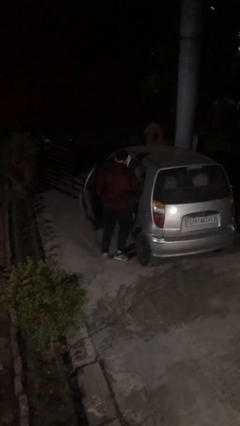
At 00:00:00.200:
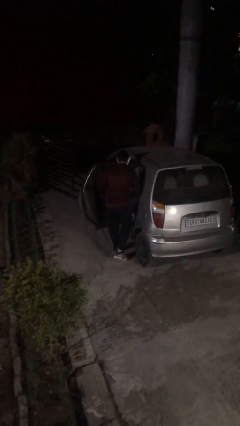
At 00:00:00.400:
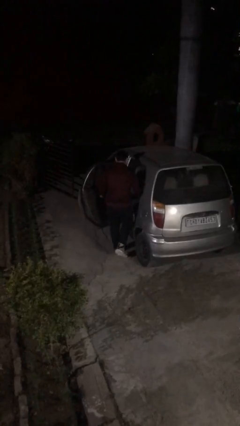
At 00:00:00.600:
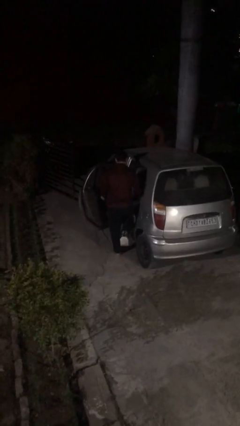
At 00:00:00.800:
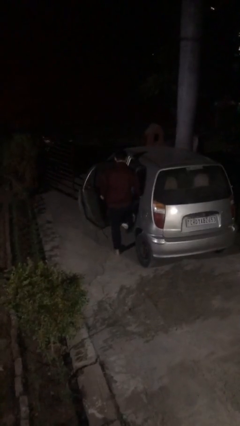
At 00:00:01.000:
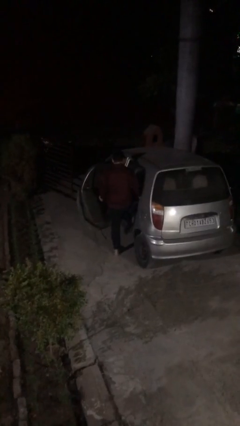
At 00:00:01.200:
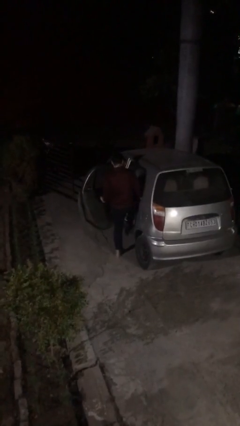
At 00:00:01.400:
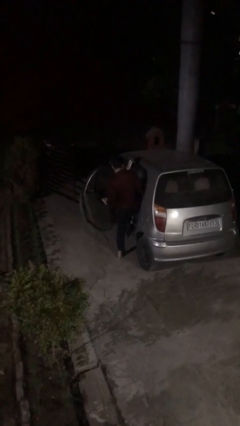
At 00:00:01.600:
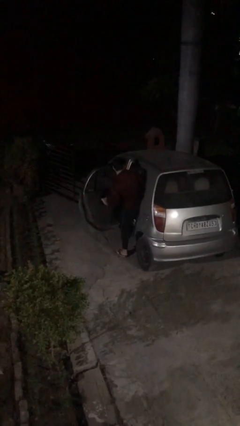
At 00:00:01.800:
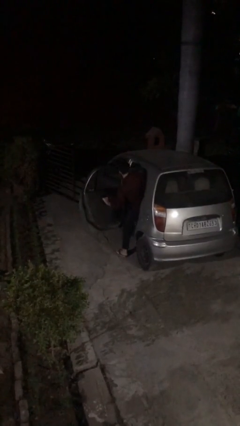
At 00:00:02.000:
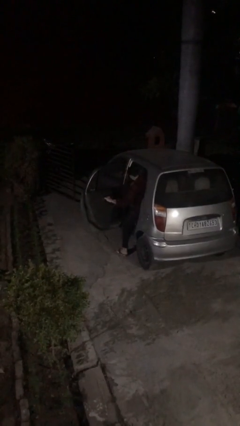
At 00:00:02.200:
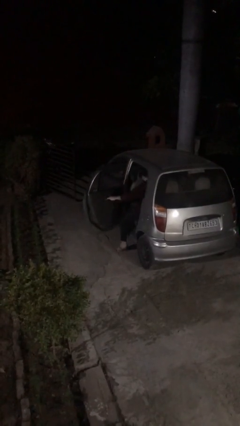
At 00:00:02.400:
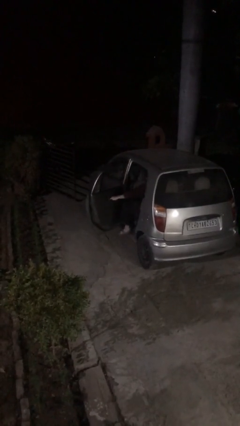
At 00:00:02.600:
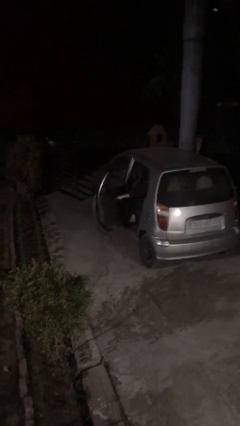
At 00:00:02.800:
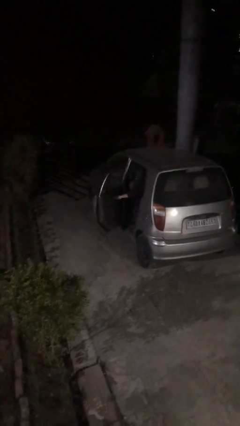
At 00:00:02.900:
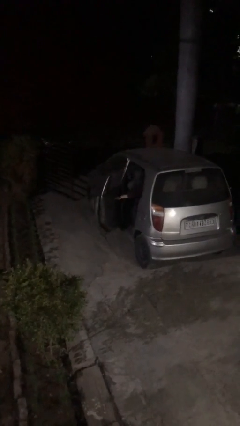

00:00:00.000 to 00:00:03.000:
person enters car

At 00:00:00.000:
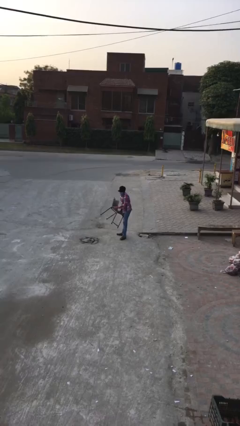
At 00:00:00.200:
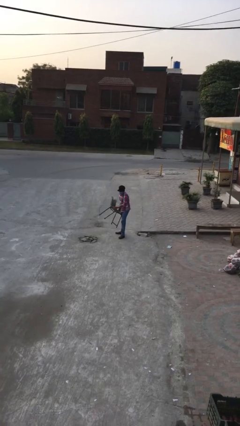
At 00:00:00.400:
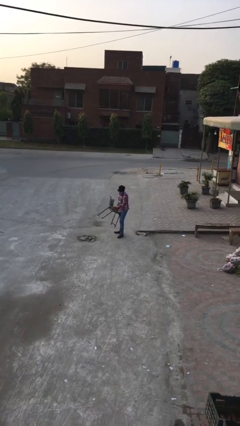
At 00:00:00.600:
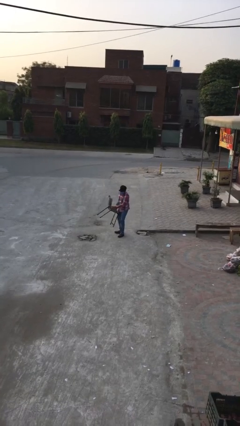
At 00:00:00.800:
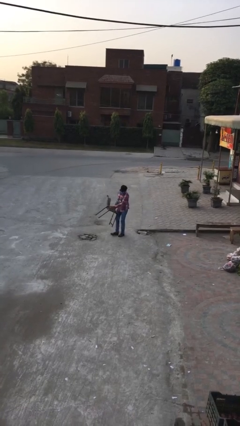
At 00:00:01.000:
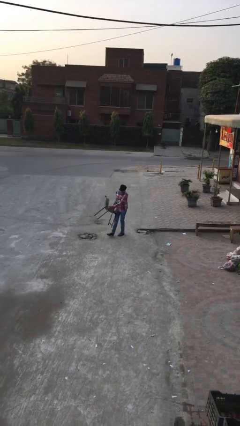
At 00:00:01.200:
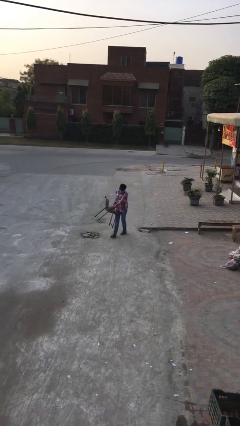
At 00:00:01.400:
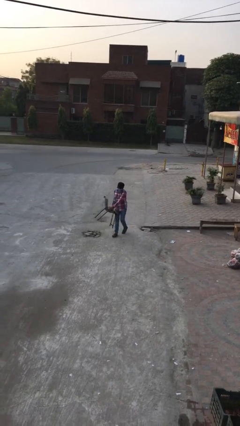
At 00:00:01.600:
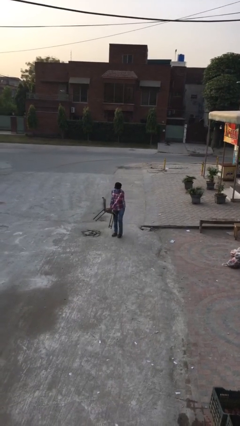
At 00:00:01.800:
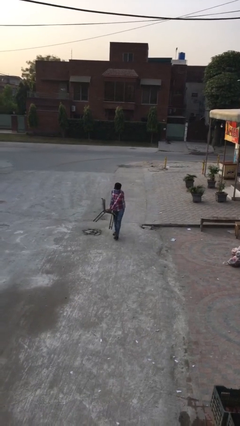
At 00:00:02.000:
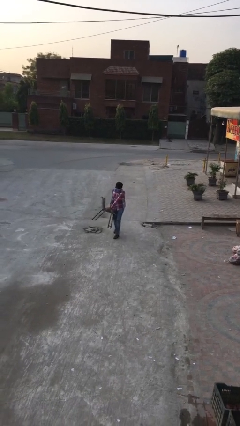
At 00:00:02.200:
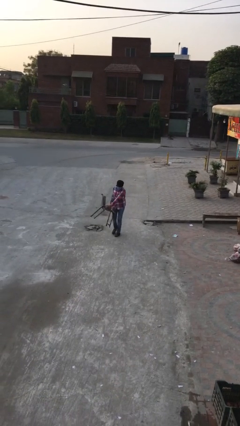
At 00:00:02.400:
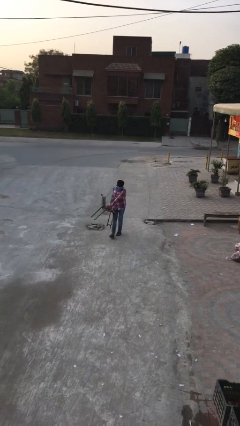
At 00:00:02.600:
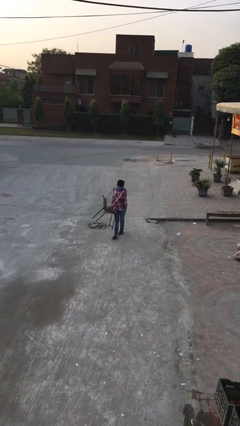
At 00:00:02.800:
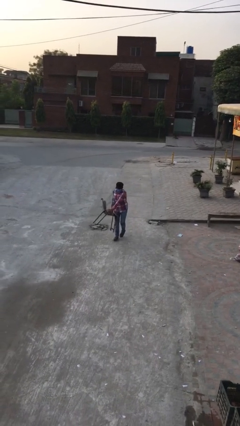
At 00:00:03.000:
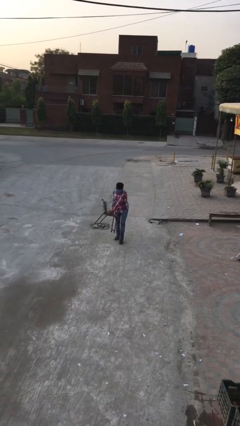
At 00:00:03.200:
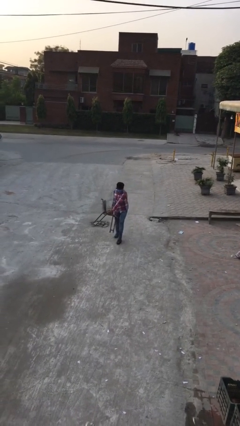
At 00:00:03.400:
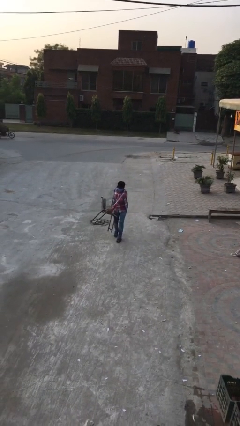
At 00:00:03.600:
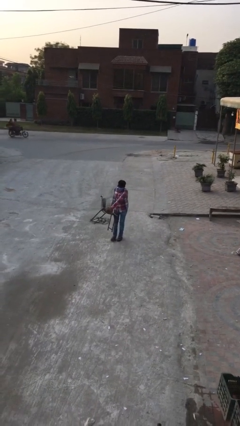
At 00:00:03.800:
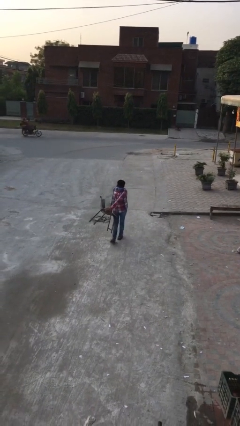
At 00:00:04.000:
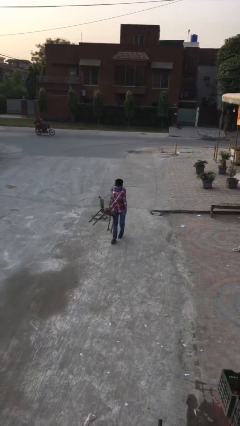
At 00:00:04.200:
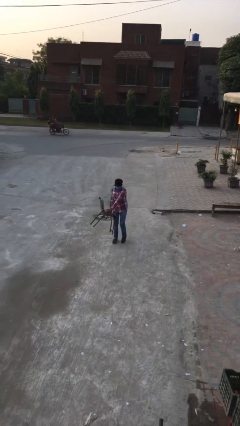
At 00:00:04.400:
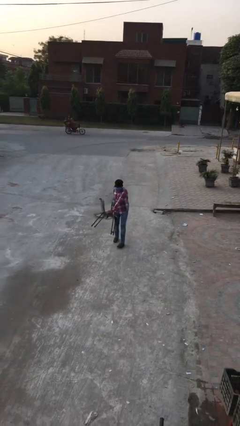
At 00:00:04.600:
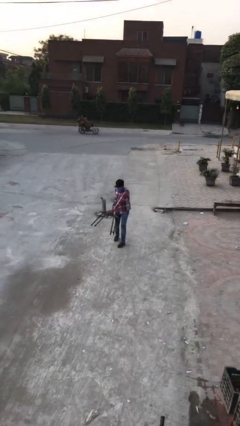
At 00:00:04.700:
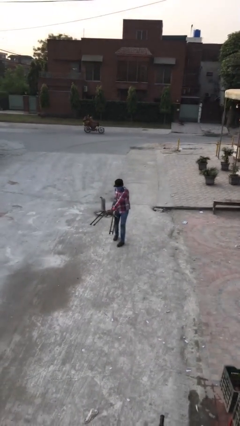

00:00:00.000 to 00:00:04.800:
person carries heavy object

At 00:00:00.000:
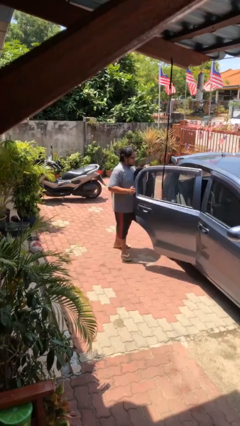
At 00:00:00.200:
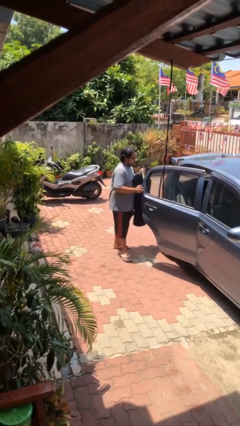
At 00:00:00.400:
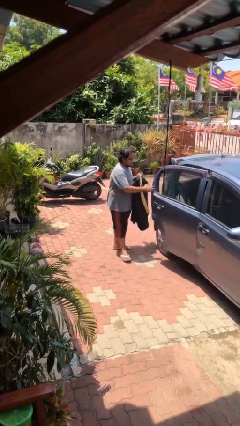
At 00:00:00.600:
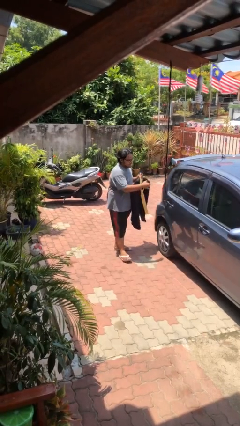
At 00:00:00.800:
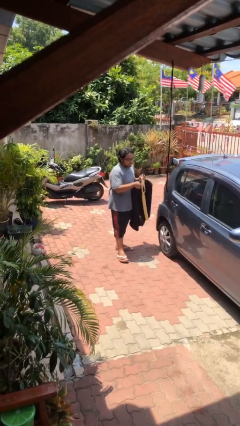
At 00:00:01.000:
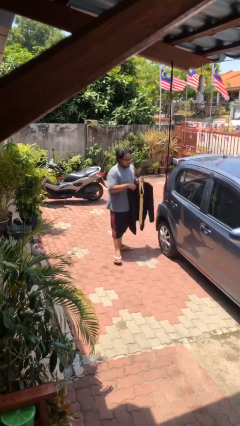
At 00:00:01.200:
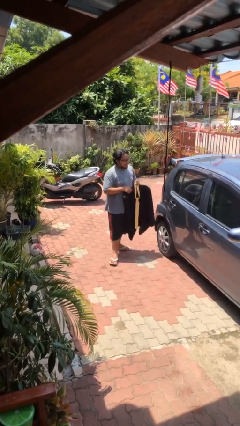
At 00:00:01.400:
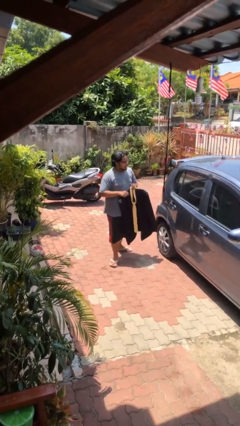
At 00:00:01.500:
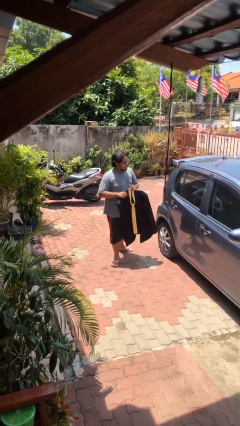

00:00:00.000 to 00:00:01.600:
person closes car door

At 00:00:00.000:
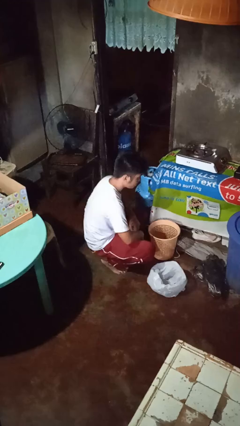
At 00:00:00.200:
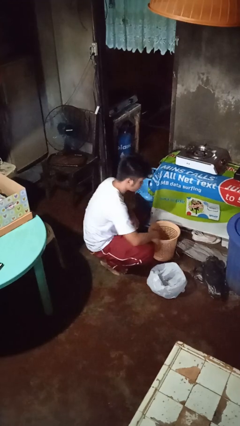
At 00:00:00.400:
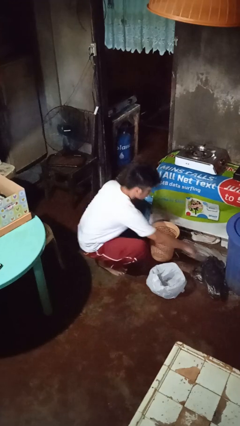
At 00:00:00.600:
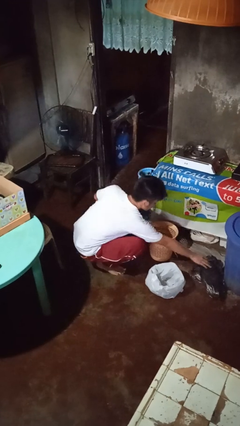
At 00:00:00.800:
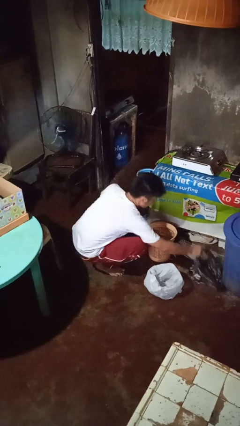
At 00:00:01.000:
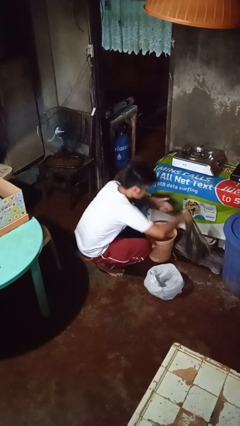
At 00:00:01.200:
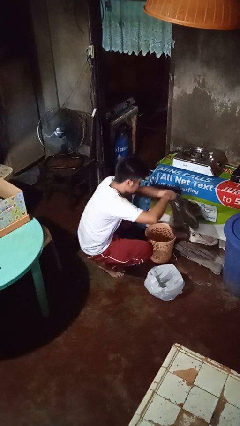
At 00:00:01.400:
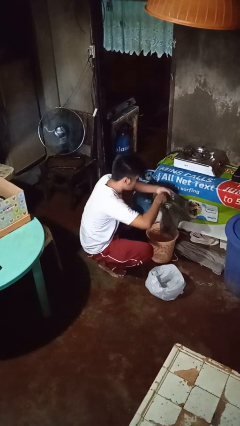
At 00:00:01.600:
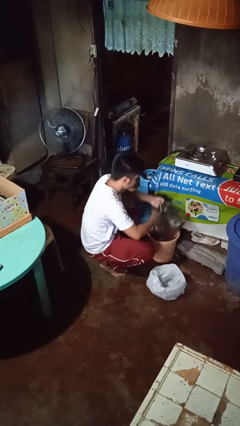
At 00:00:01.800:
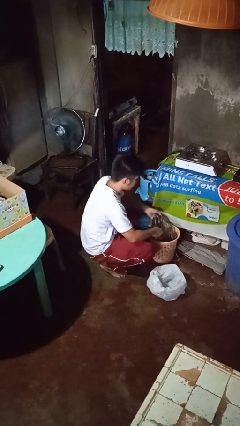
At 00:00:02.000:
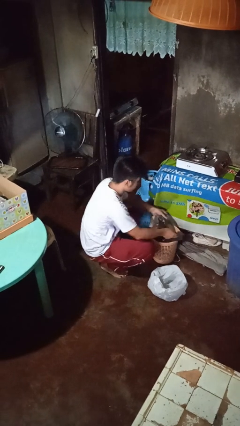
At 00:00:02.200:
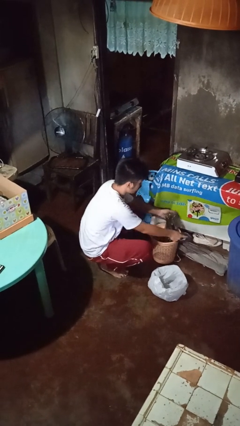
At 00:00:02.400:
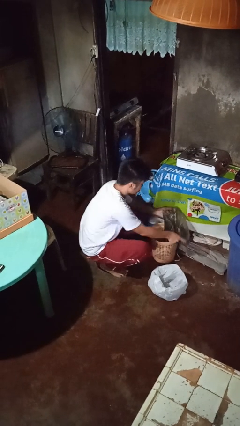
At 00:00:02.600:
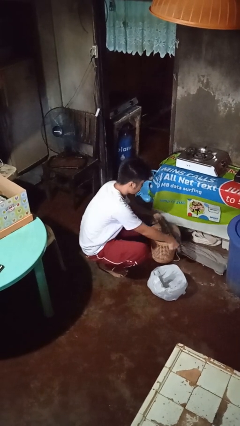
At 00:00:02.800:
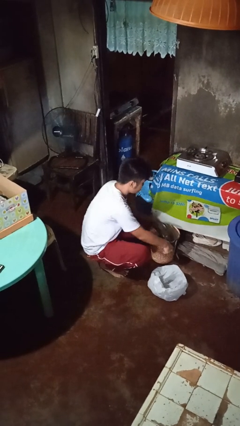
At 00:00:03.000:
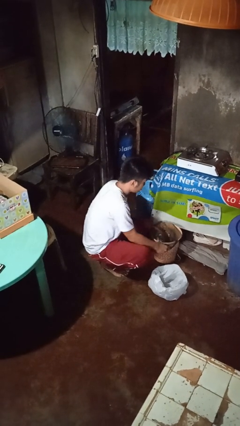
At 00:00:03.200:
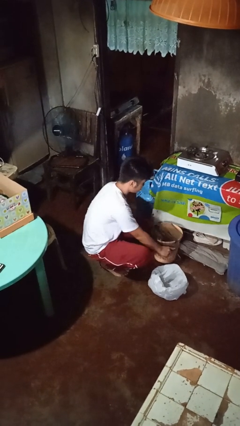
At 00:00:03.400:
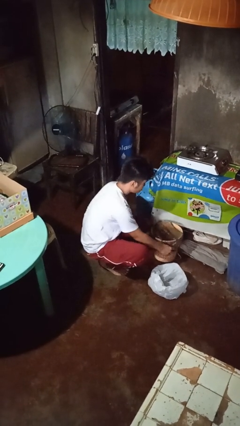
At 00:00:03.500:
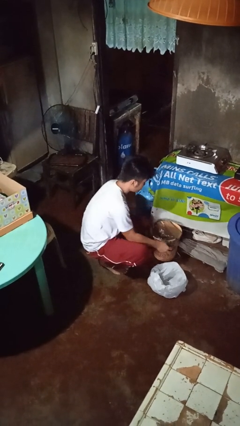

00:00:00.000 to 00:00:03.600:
person inserts trashbag into trashcan

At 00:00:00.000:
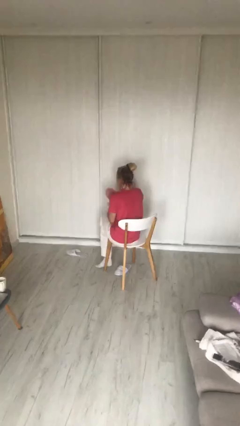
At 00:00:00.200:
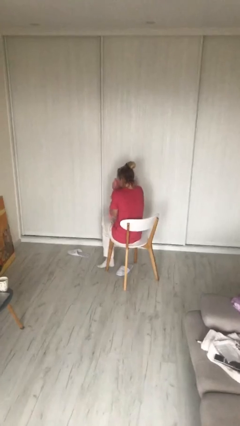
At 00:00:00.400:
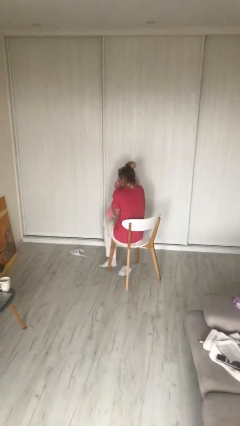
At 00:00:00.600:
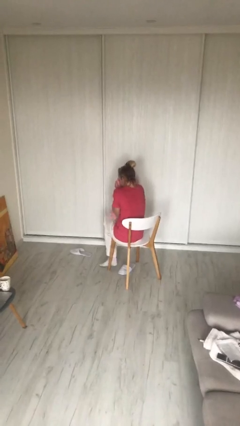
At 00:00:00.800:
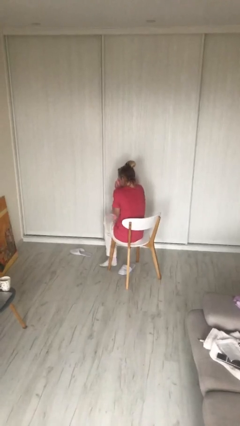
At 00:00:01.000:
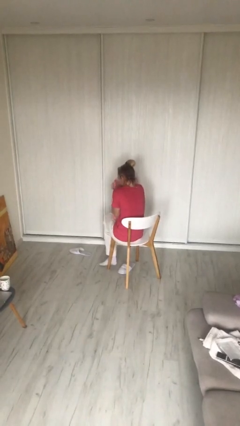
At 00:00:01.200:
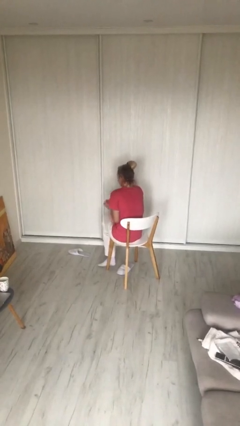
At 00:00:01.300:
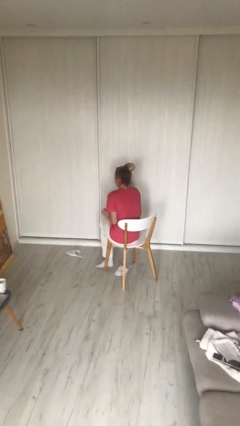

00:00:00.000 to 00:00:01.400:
person blows nose

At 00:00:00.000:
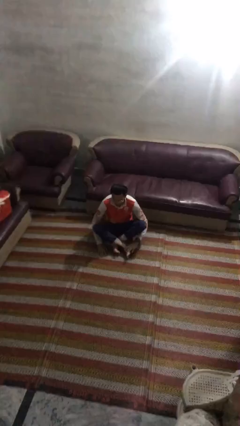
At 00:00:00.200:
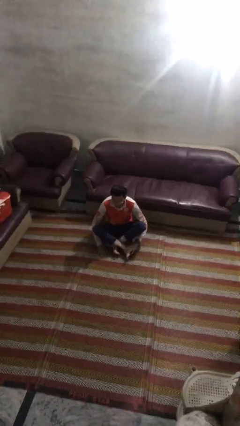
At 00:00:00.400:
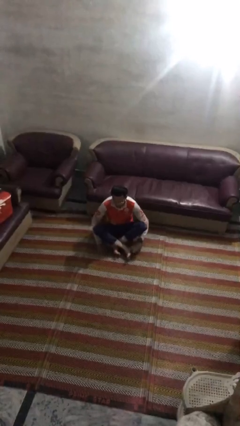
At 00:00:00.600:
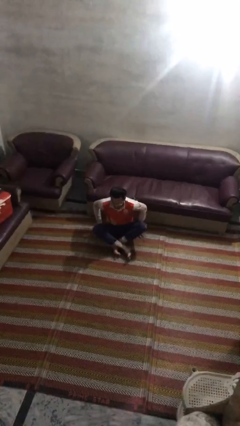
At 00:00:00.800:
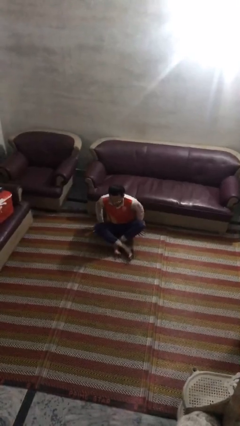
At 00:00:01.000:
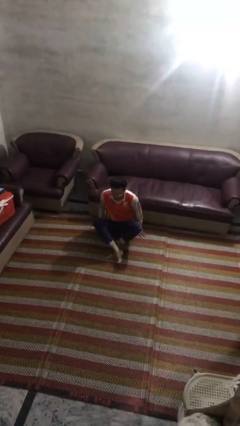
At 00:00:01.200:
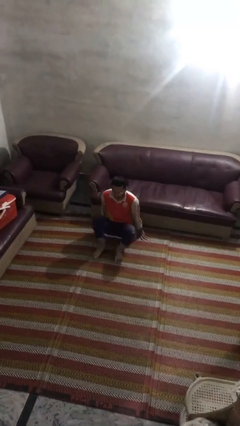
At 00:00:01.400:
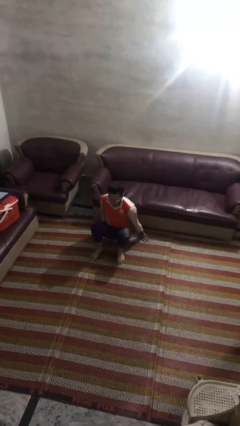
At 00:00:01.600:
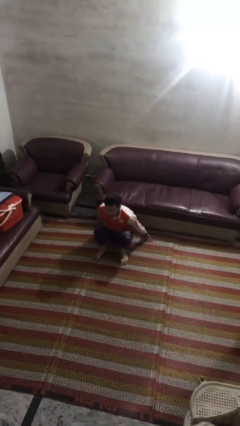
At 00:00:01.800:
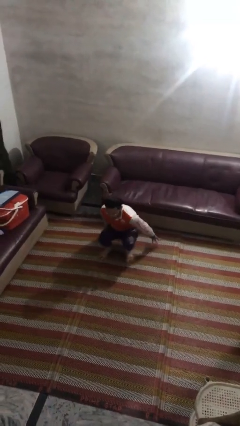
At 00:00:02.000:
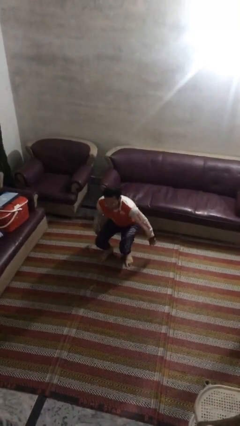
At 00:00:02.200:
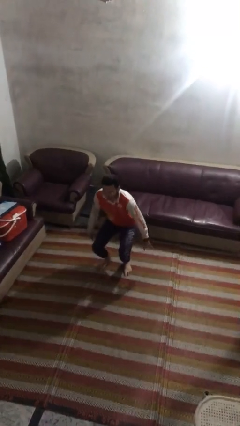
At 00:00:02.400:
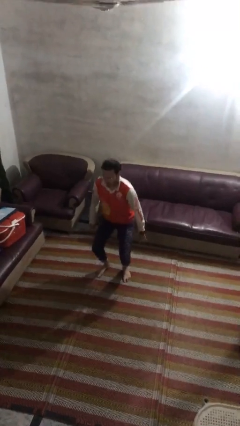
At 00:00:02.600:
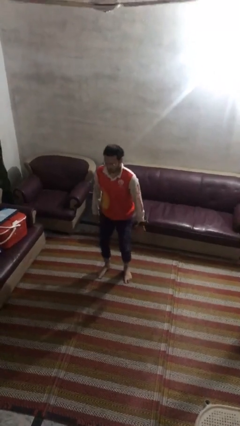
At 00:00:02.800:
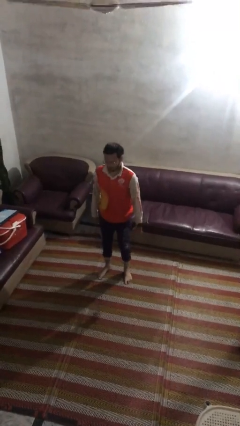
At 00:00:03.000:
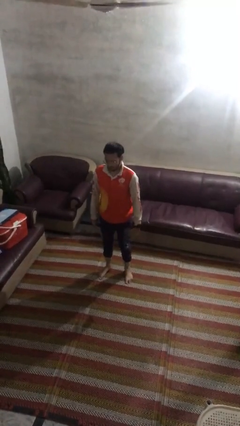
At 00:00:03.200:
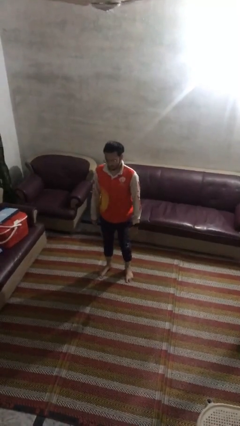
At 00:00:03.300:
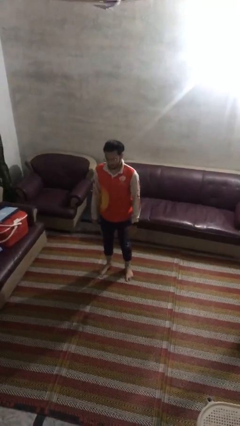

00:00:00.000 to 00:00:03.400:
person stands up from floor
